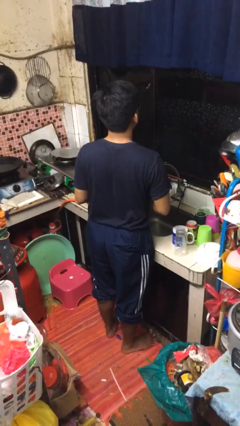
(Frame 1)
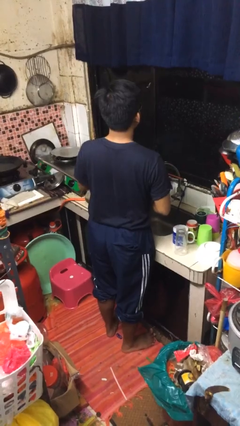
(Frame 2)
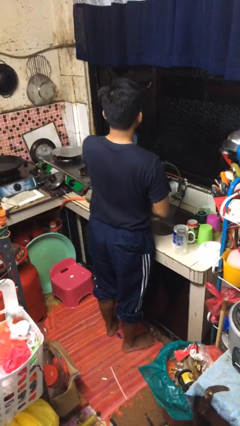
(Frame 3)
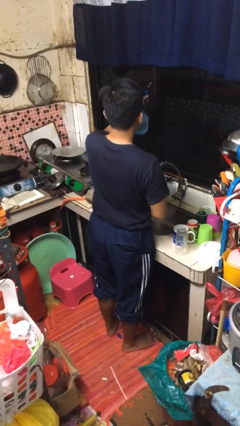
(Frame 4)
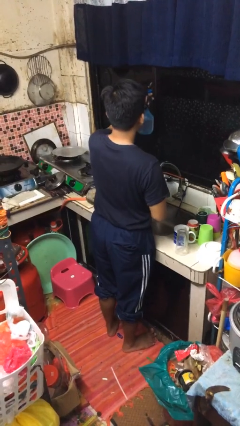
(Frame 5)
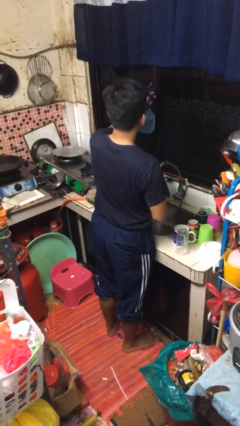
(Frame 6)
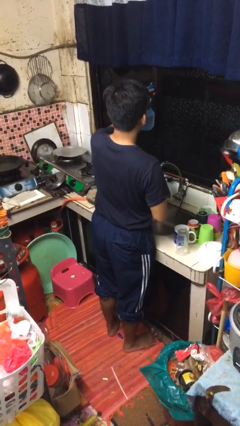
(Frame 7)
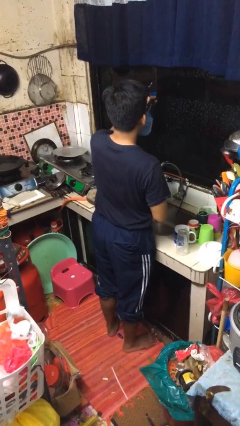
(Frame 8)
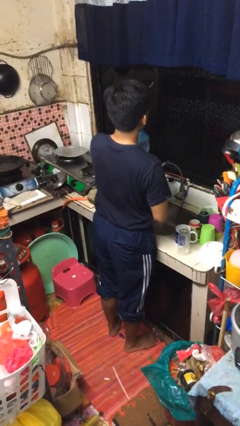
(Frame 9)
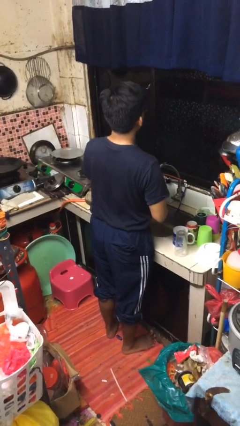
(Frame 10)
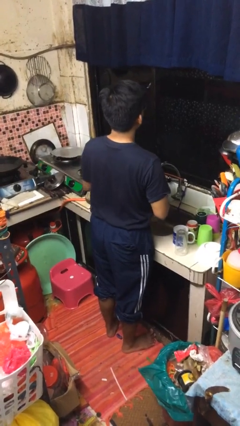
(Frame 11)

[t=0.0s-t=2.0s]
person sprays from bottle

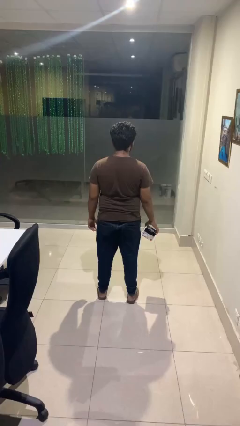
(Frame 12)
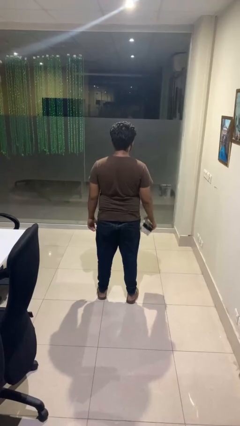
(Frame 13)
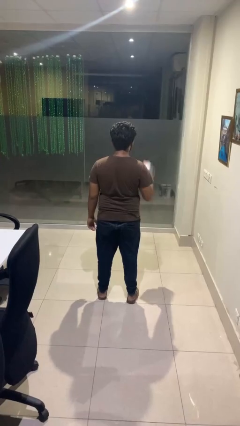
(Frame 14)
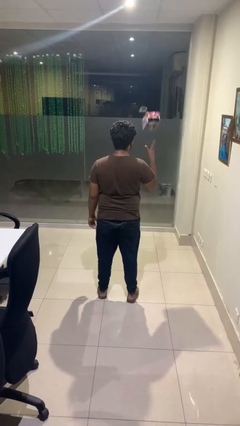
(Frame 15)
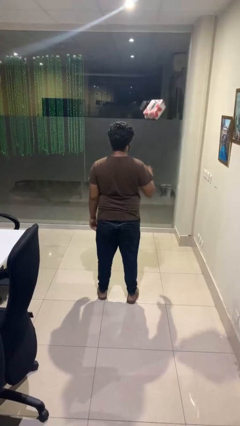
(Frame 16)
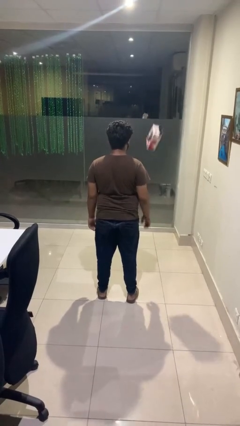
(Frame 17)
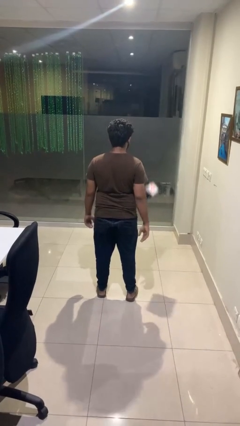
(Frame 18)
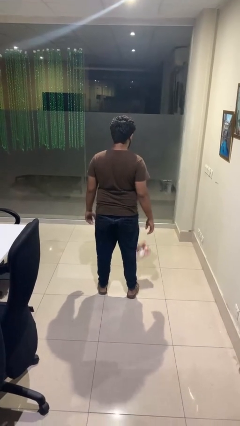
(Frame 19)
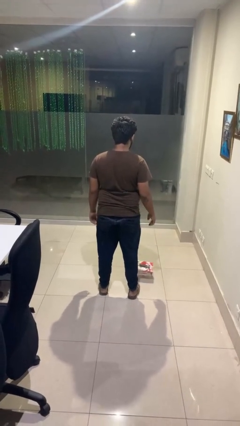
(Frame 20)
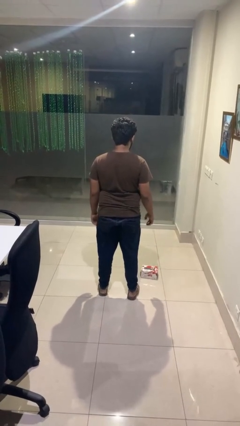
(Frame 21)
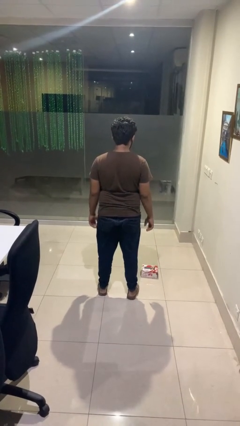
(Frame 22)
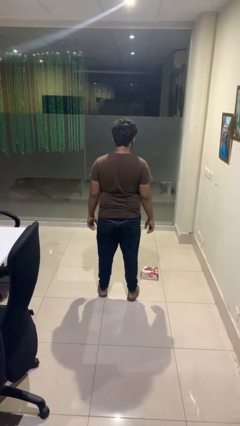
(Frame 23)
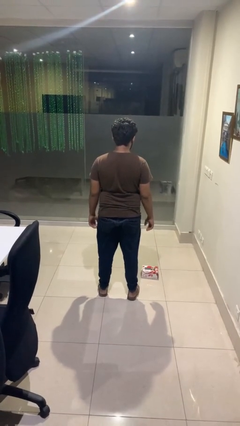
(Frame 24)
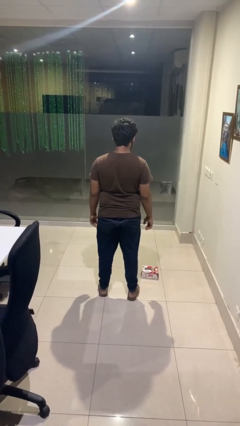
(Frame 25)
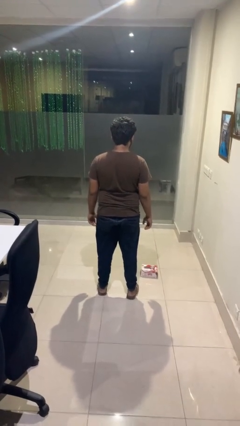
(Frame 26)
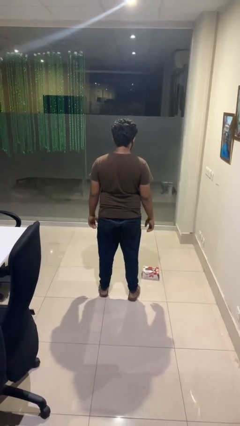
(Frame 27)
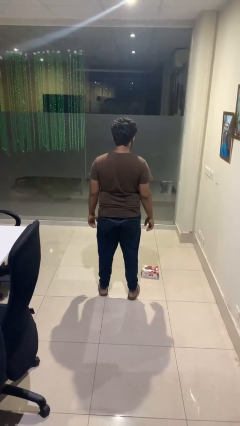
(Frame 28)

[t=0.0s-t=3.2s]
person throws object into air

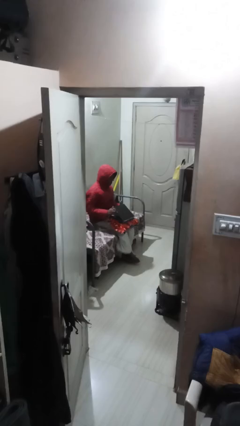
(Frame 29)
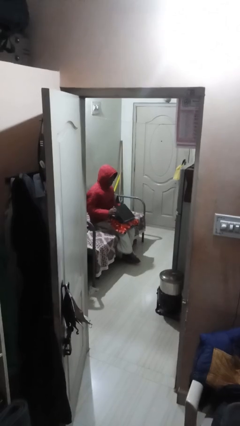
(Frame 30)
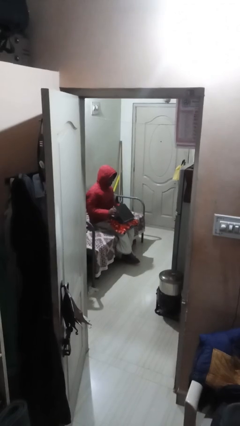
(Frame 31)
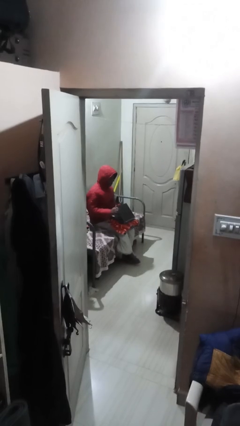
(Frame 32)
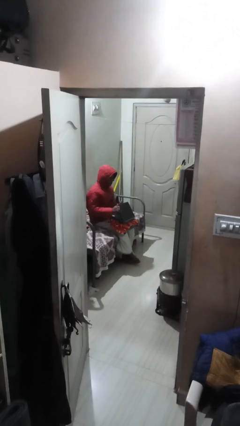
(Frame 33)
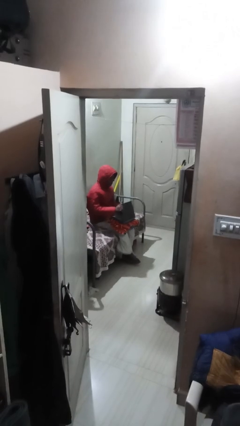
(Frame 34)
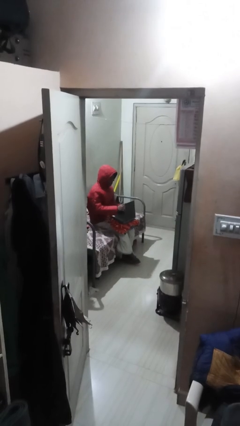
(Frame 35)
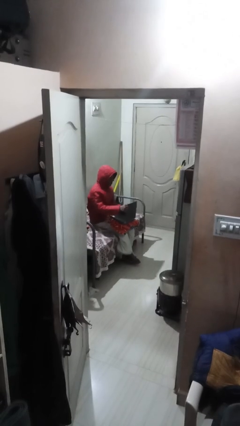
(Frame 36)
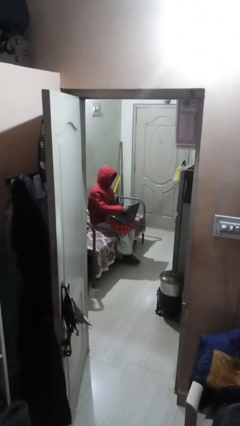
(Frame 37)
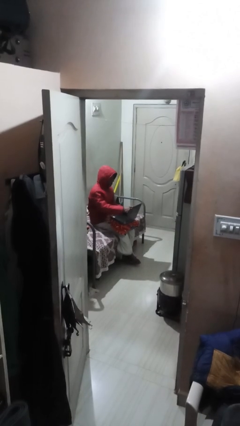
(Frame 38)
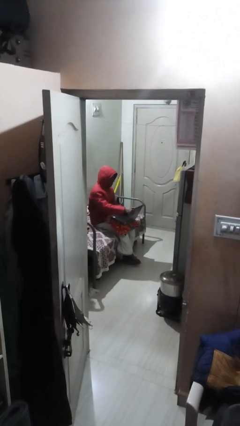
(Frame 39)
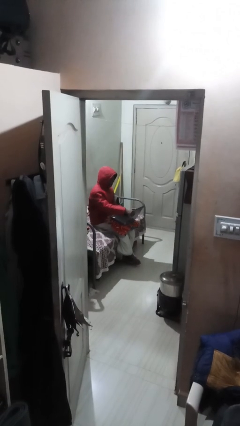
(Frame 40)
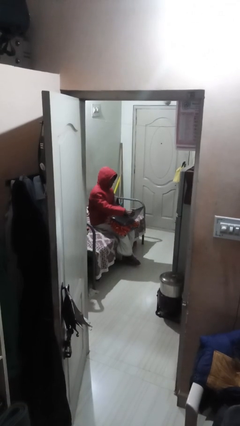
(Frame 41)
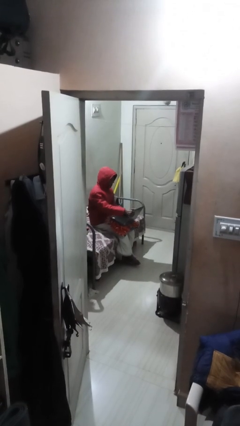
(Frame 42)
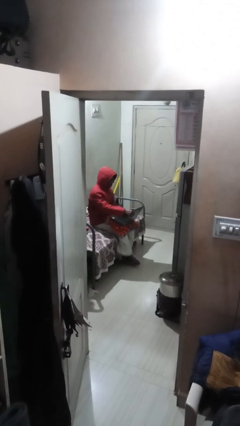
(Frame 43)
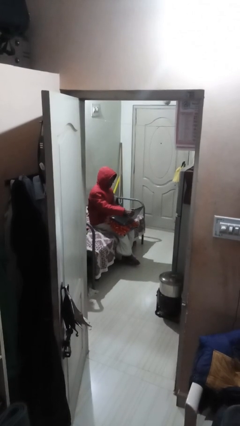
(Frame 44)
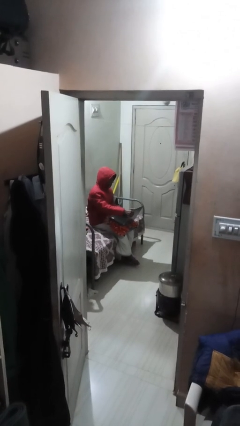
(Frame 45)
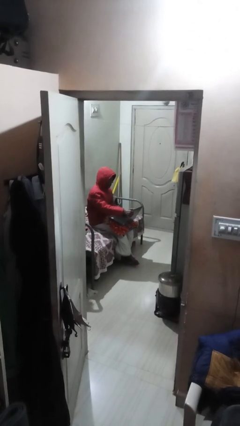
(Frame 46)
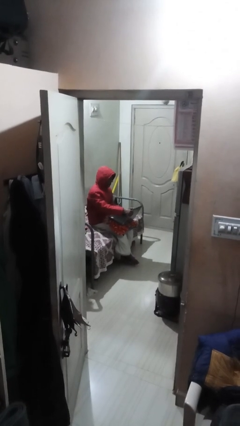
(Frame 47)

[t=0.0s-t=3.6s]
person interacts with laptop

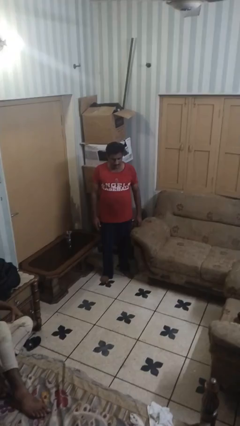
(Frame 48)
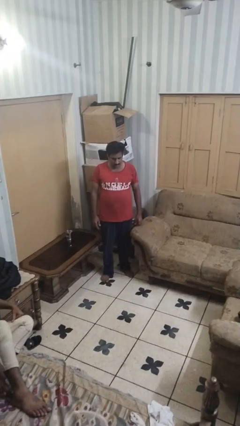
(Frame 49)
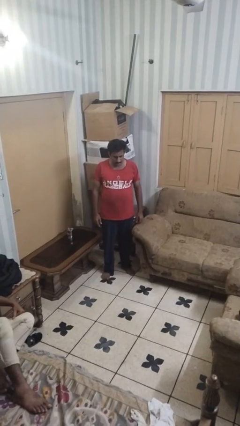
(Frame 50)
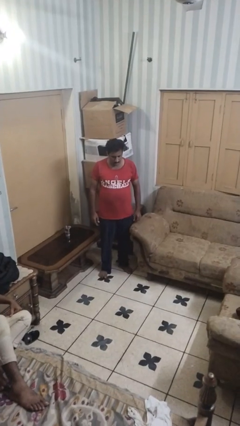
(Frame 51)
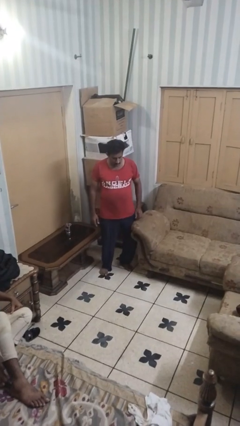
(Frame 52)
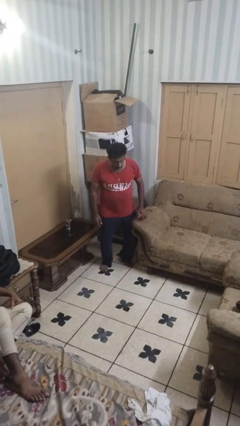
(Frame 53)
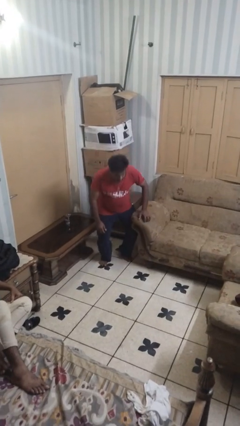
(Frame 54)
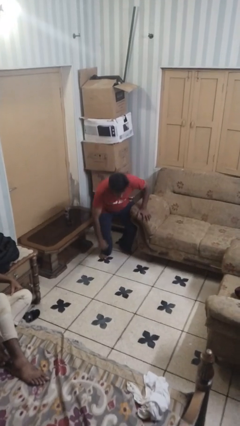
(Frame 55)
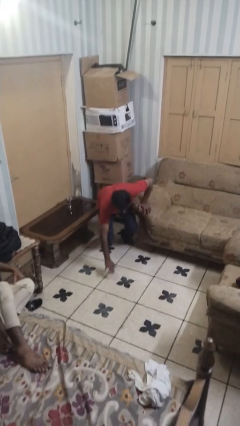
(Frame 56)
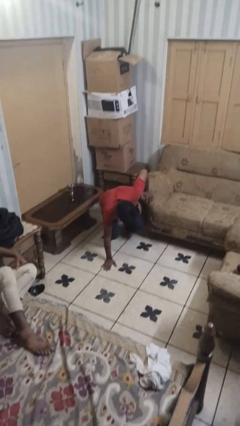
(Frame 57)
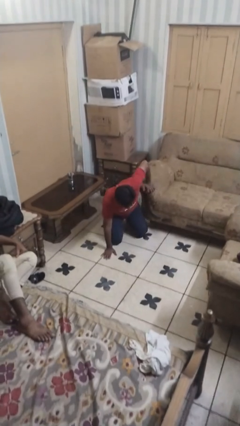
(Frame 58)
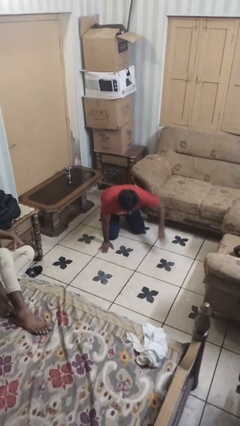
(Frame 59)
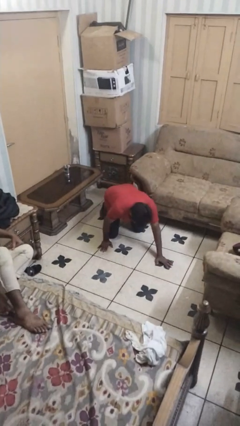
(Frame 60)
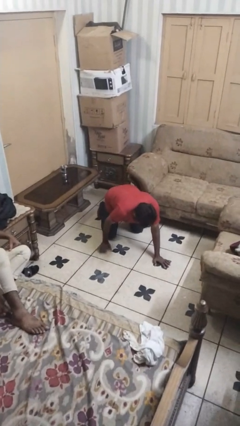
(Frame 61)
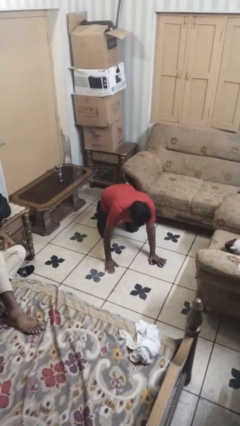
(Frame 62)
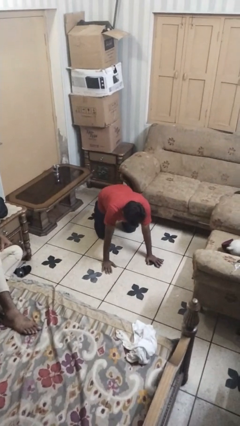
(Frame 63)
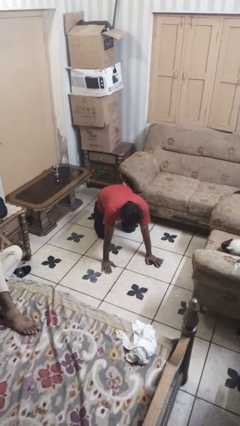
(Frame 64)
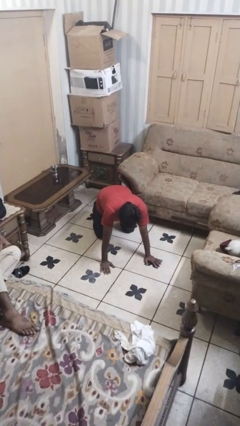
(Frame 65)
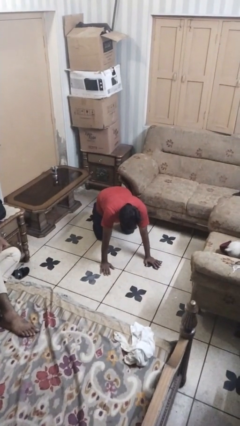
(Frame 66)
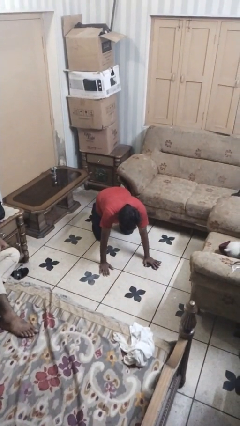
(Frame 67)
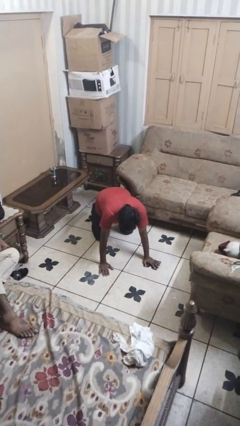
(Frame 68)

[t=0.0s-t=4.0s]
person trips on object on floor

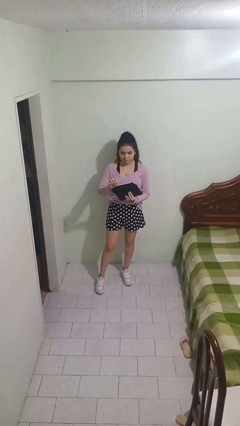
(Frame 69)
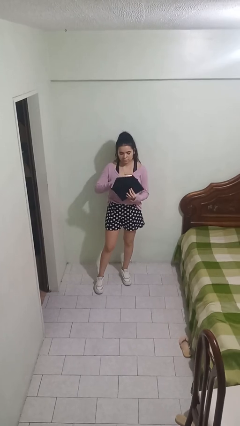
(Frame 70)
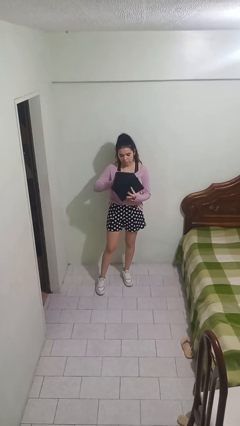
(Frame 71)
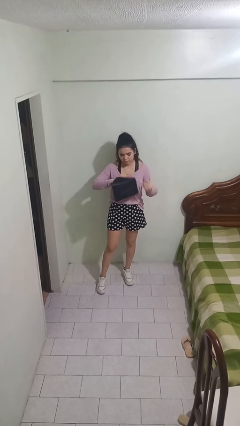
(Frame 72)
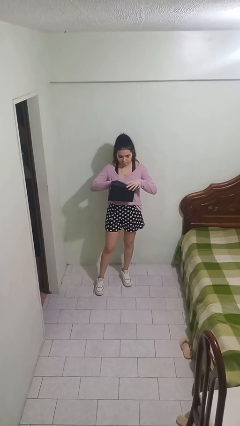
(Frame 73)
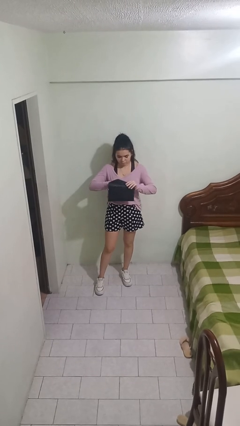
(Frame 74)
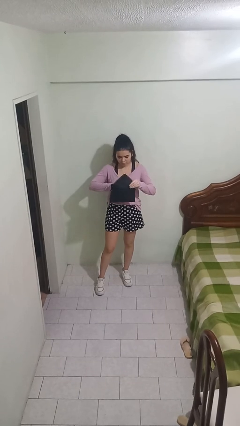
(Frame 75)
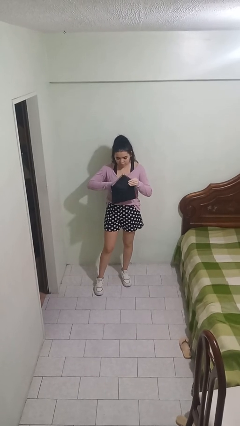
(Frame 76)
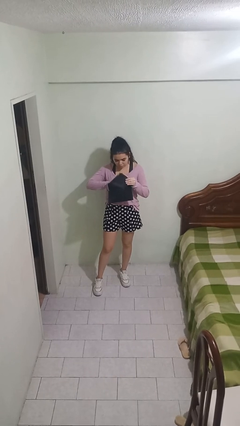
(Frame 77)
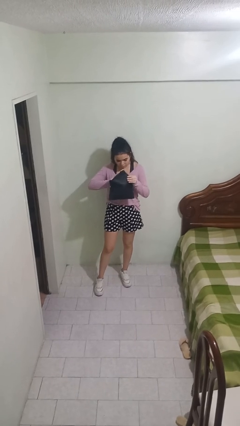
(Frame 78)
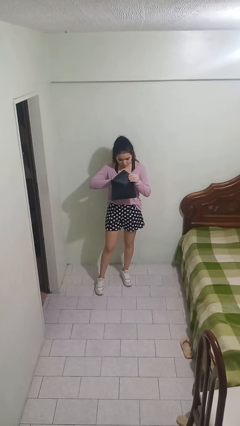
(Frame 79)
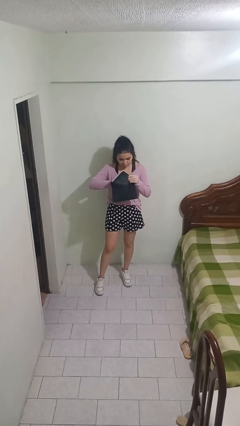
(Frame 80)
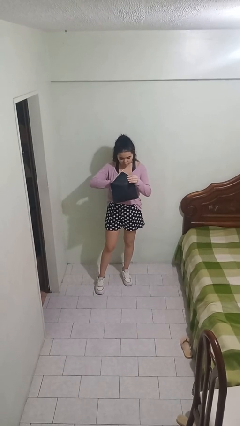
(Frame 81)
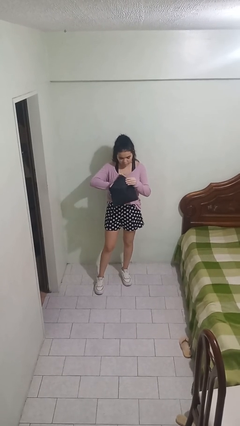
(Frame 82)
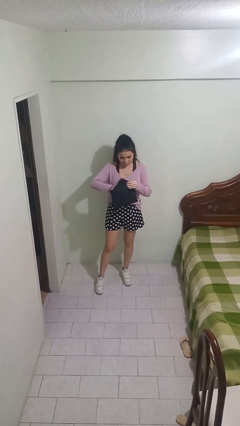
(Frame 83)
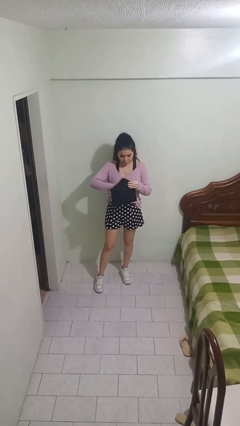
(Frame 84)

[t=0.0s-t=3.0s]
person searches in purse

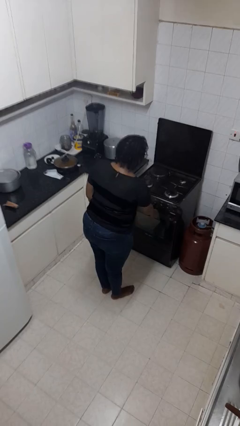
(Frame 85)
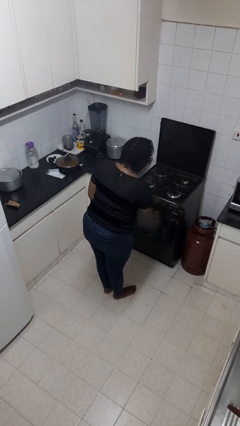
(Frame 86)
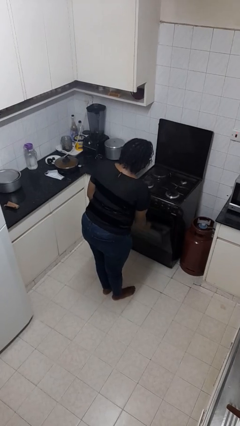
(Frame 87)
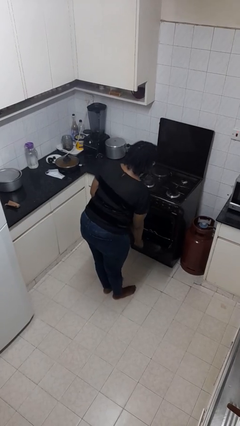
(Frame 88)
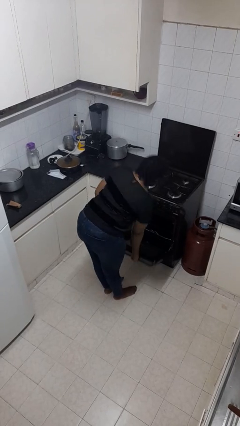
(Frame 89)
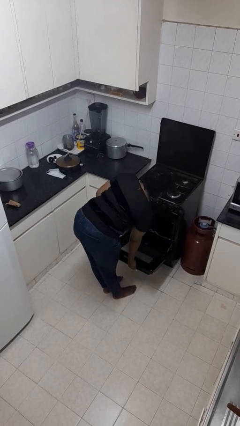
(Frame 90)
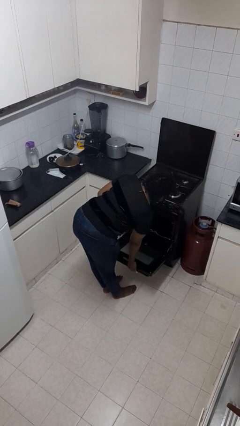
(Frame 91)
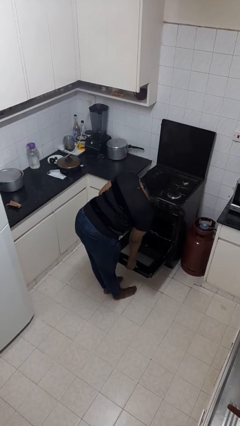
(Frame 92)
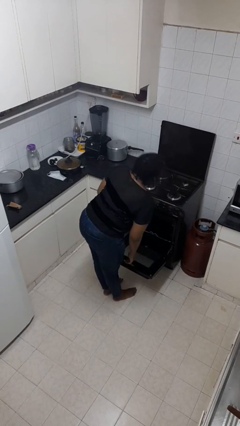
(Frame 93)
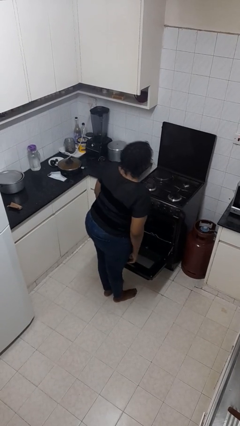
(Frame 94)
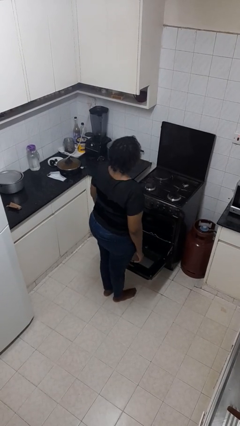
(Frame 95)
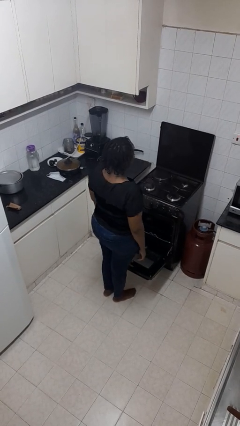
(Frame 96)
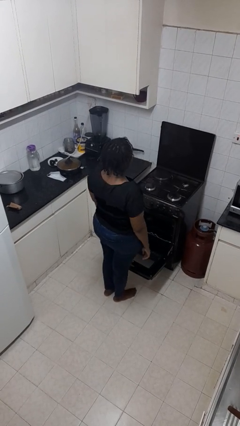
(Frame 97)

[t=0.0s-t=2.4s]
person opens oven door
